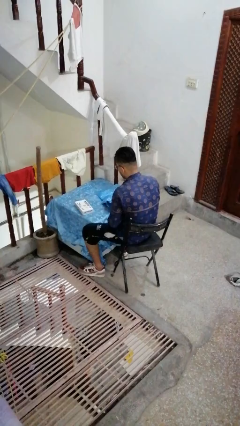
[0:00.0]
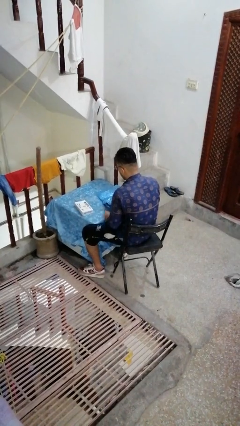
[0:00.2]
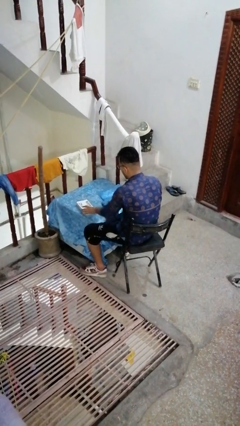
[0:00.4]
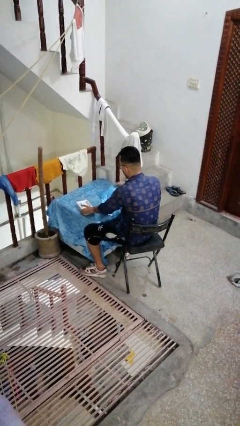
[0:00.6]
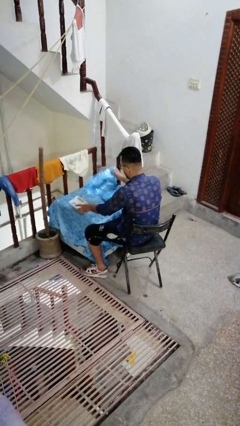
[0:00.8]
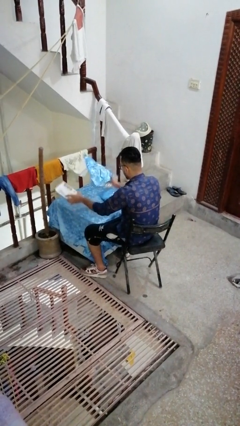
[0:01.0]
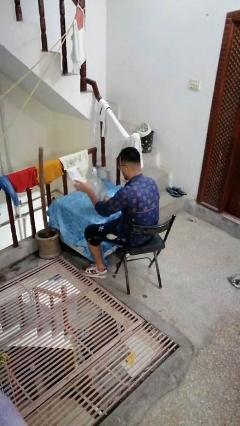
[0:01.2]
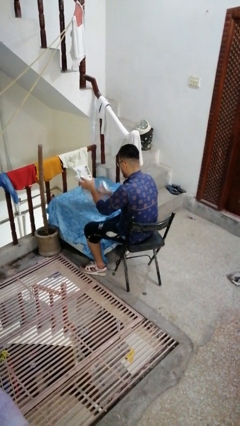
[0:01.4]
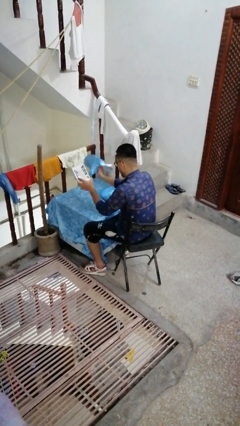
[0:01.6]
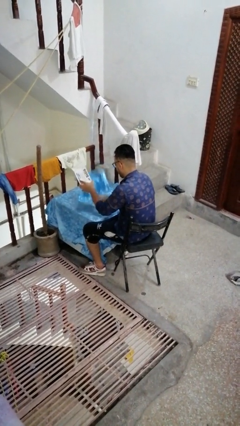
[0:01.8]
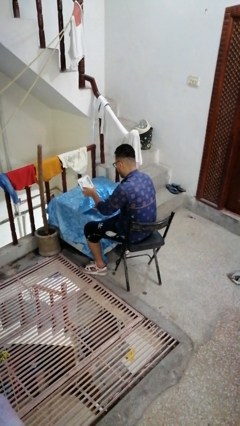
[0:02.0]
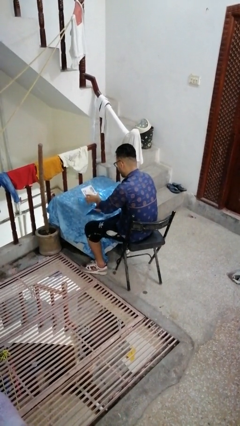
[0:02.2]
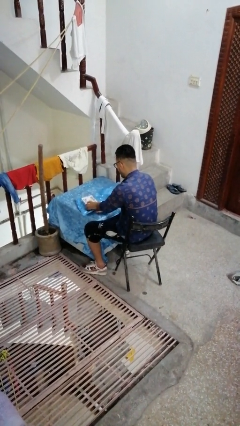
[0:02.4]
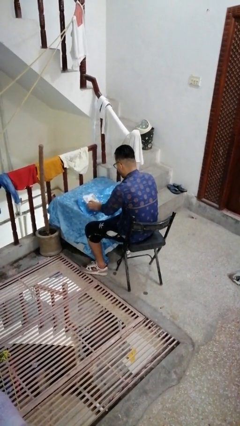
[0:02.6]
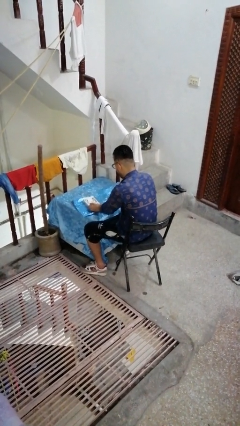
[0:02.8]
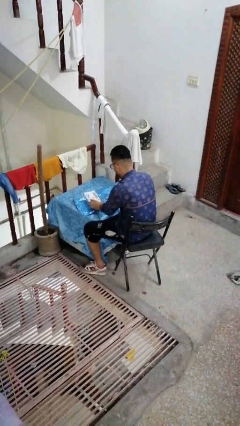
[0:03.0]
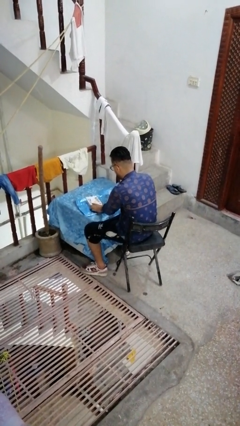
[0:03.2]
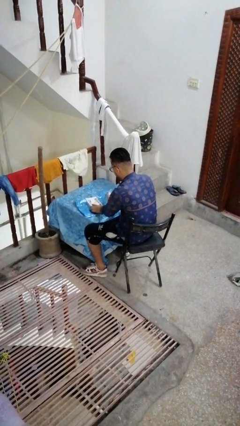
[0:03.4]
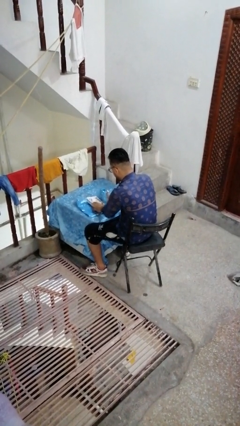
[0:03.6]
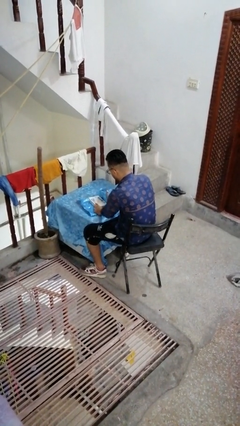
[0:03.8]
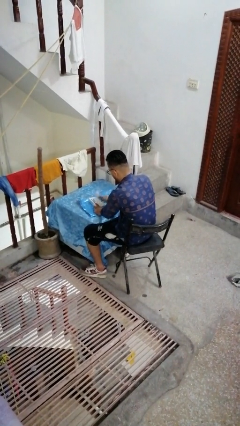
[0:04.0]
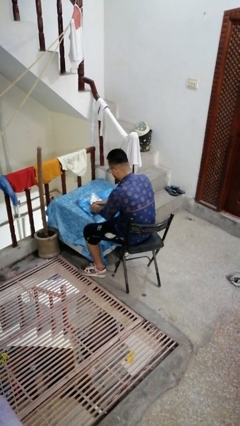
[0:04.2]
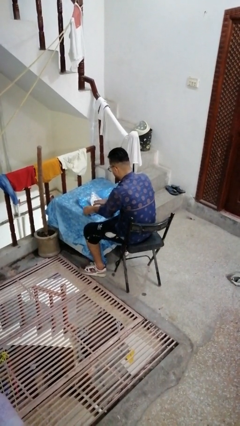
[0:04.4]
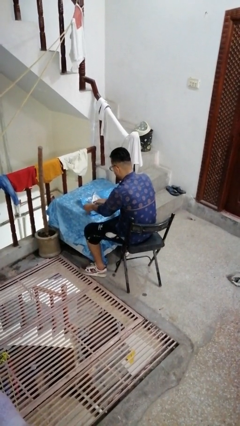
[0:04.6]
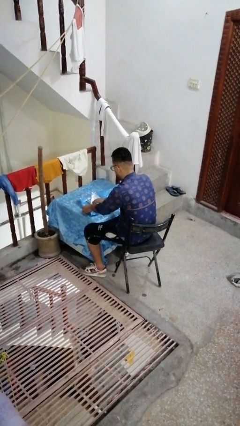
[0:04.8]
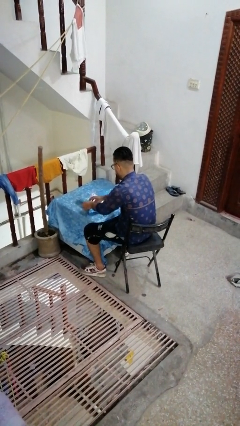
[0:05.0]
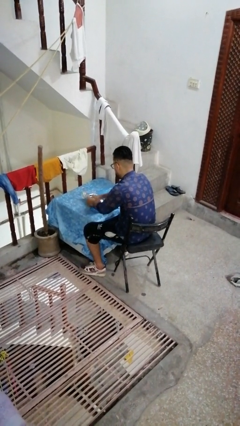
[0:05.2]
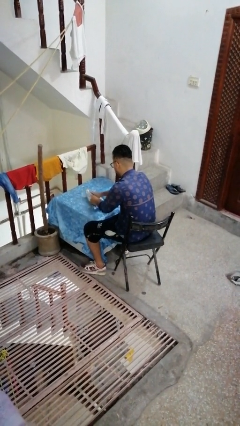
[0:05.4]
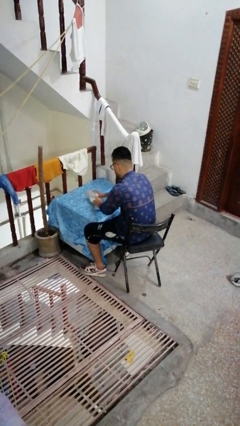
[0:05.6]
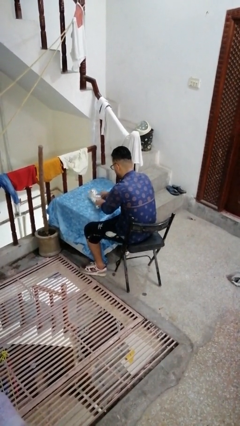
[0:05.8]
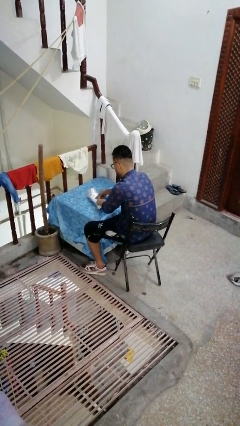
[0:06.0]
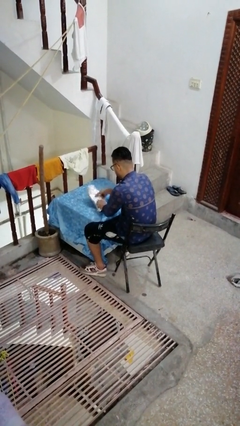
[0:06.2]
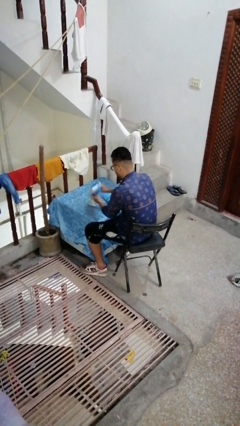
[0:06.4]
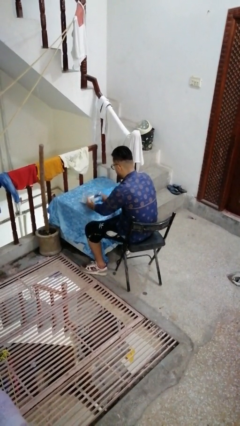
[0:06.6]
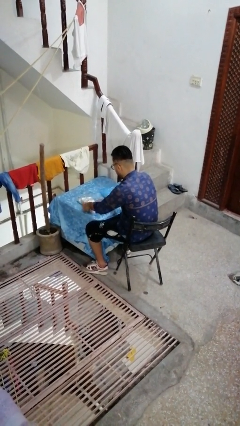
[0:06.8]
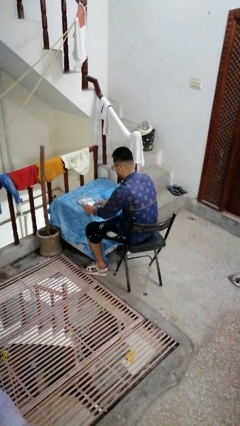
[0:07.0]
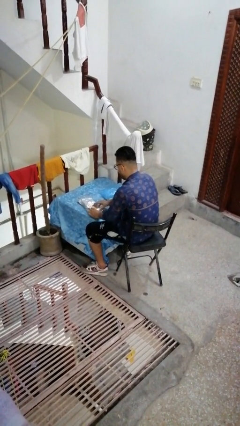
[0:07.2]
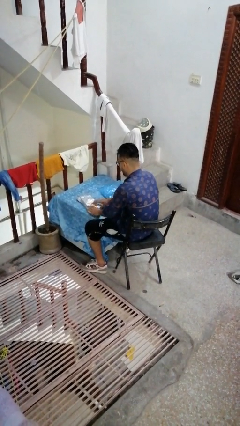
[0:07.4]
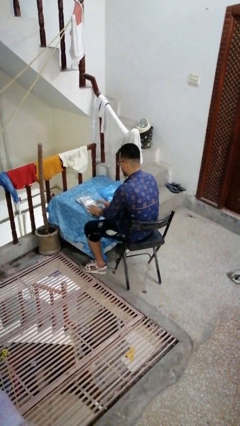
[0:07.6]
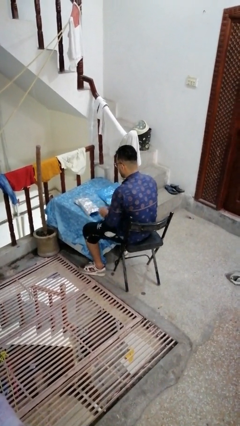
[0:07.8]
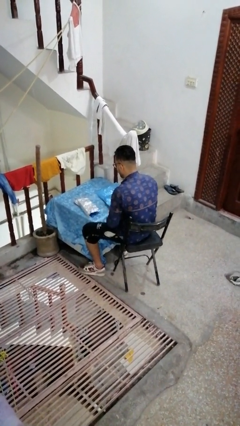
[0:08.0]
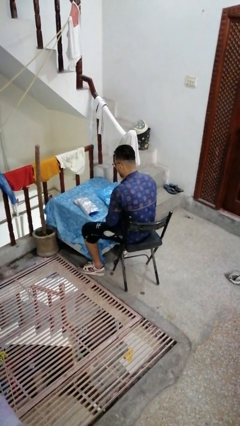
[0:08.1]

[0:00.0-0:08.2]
person wraps box

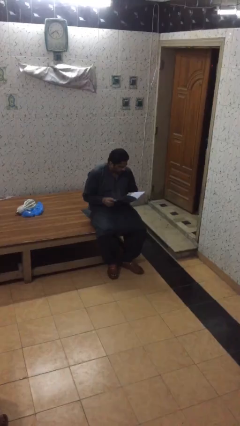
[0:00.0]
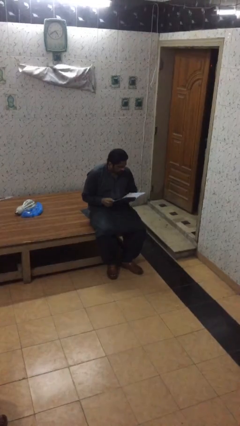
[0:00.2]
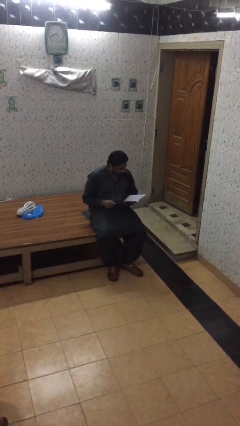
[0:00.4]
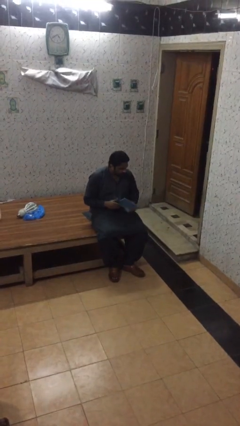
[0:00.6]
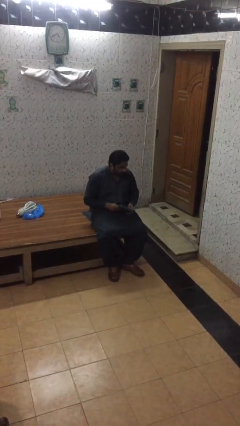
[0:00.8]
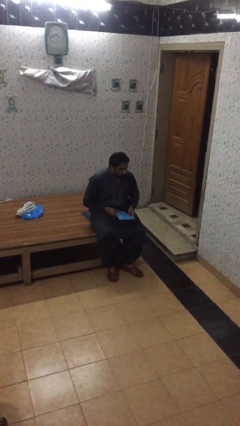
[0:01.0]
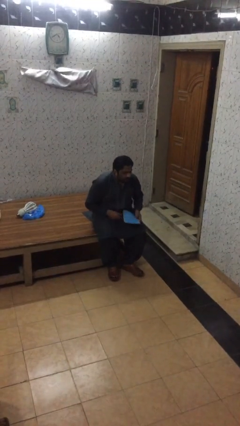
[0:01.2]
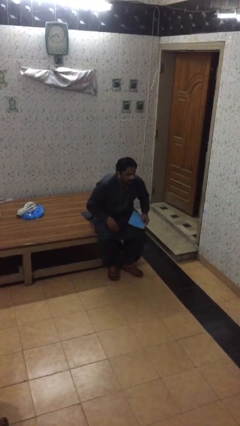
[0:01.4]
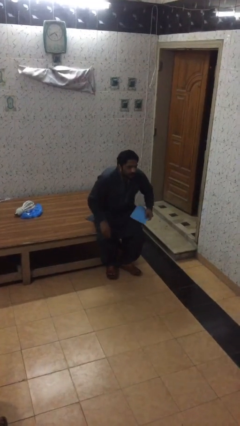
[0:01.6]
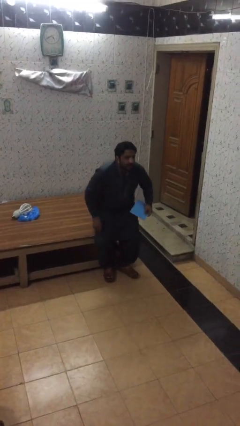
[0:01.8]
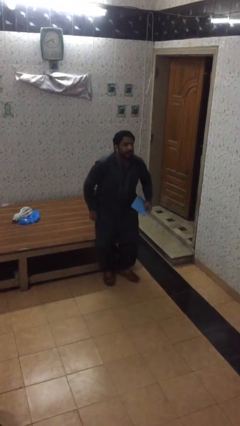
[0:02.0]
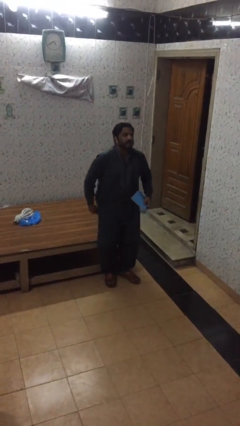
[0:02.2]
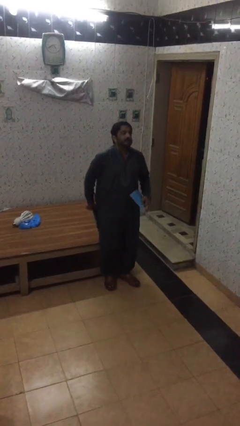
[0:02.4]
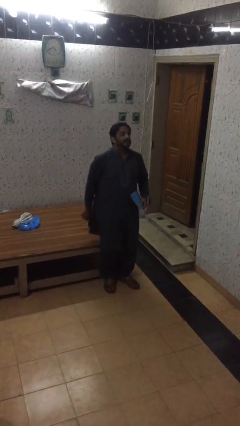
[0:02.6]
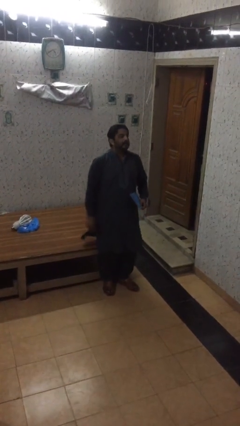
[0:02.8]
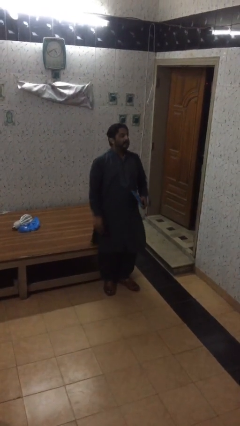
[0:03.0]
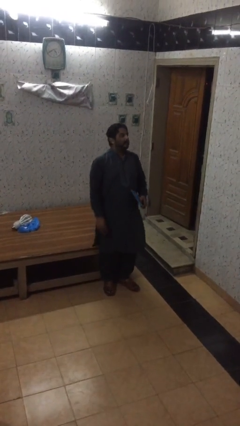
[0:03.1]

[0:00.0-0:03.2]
person stands up

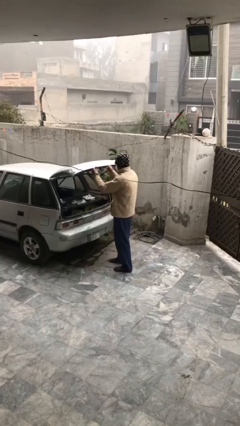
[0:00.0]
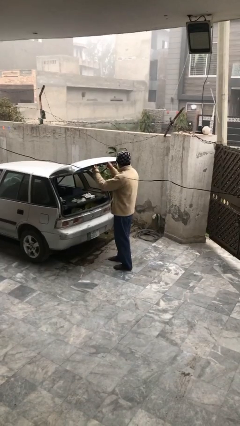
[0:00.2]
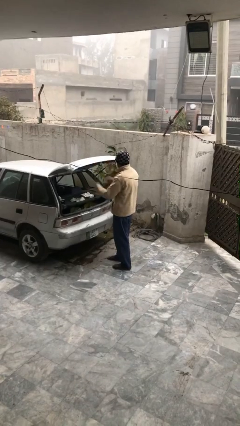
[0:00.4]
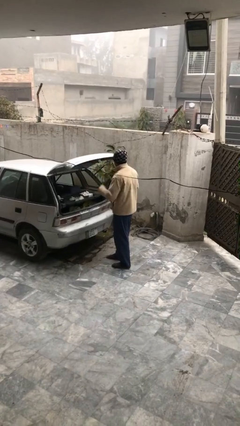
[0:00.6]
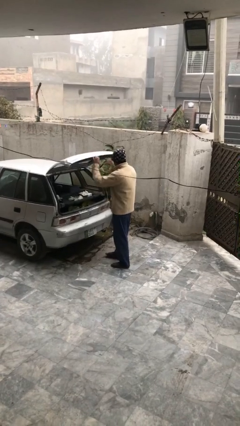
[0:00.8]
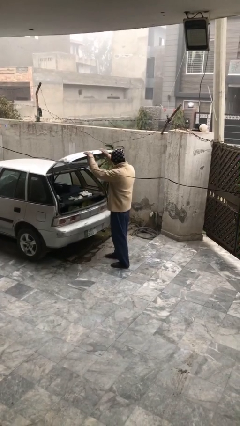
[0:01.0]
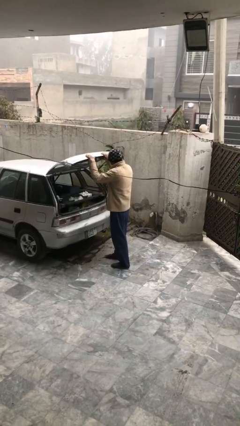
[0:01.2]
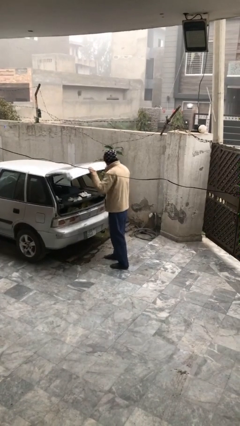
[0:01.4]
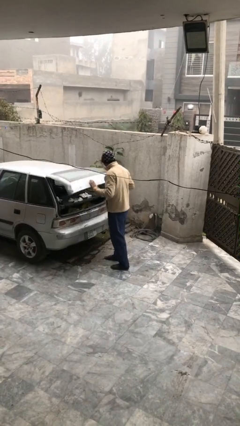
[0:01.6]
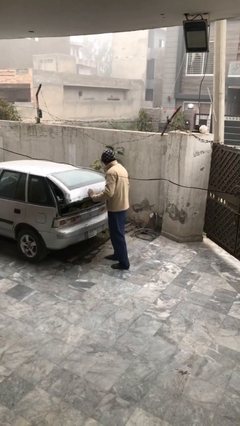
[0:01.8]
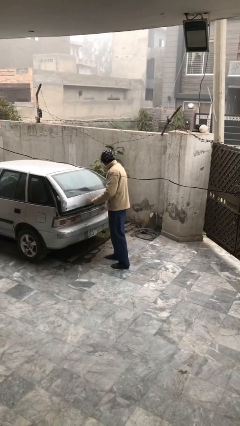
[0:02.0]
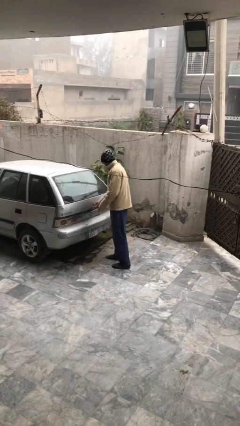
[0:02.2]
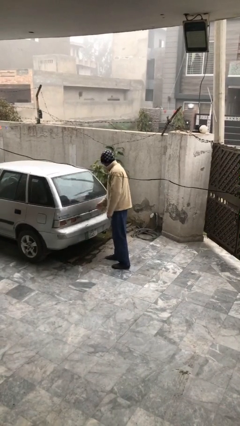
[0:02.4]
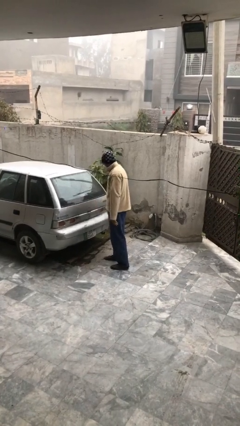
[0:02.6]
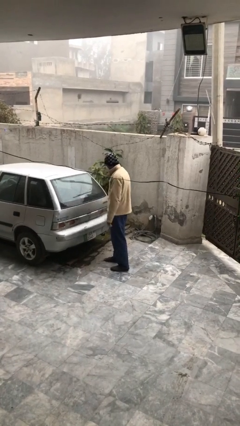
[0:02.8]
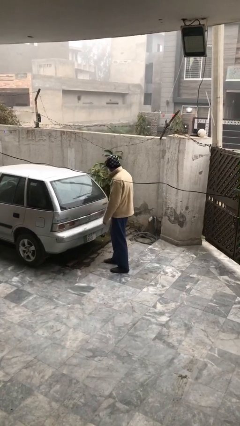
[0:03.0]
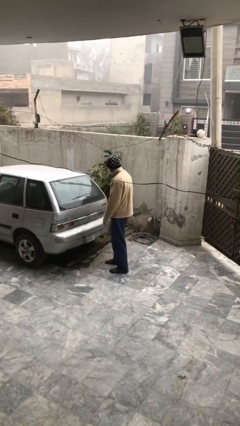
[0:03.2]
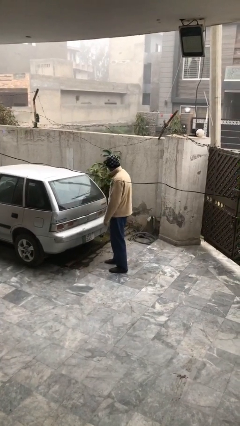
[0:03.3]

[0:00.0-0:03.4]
person closes car trunk

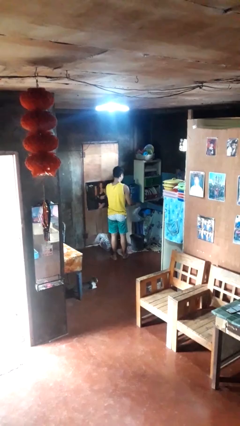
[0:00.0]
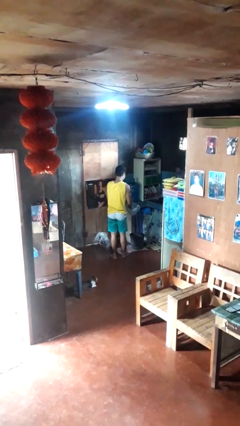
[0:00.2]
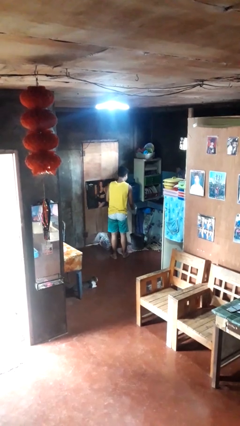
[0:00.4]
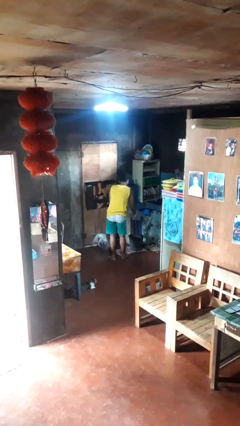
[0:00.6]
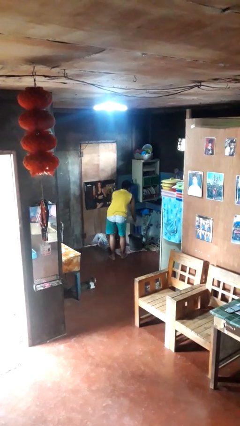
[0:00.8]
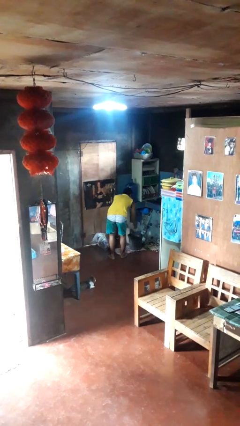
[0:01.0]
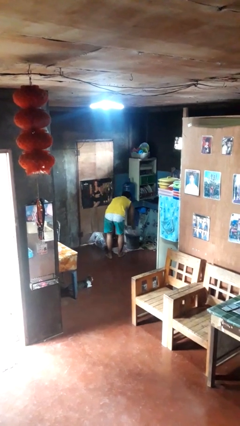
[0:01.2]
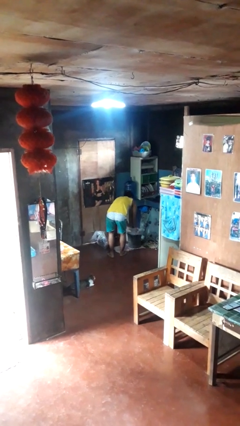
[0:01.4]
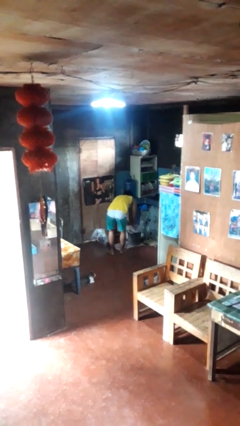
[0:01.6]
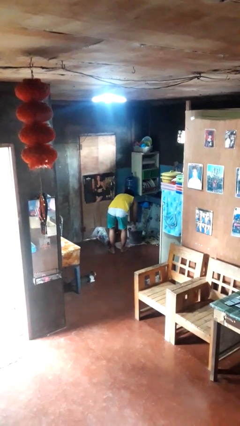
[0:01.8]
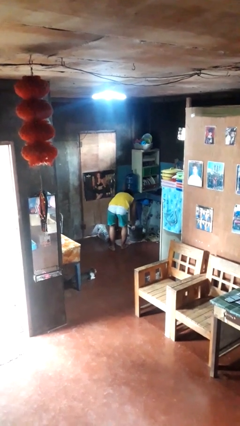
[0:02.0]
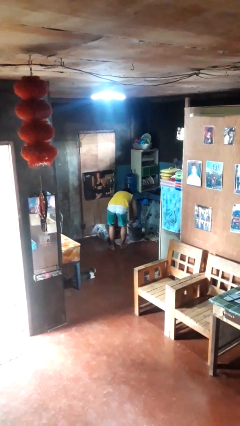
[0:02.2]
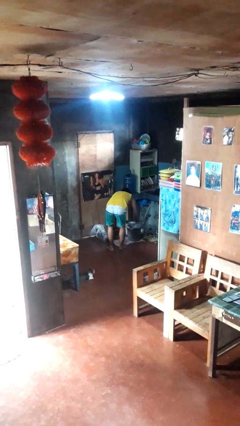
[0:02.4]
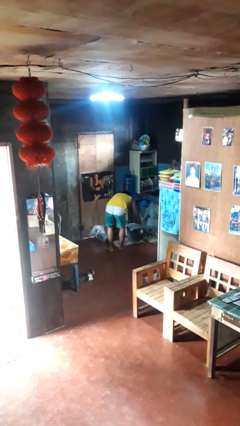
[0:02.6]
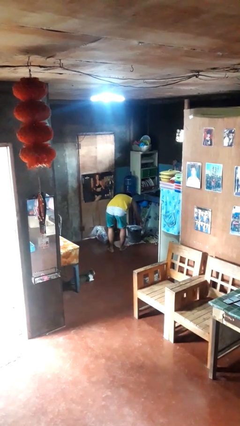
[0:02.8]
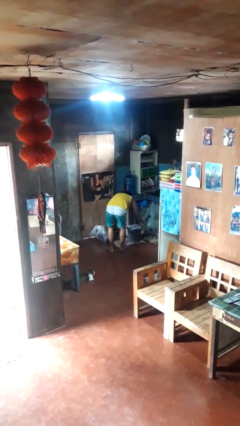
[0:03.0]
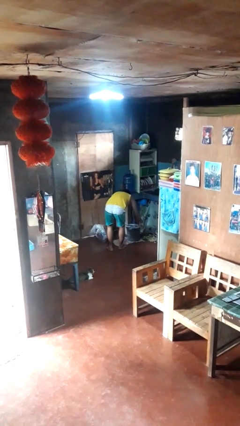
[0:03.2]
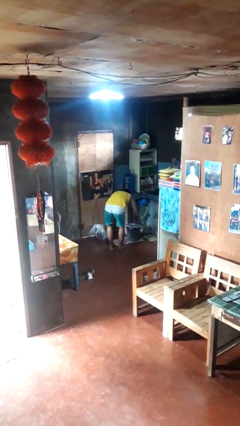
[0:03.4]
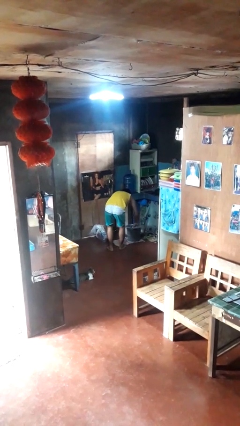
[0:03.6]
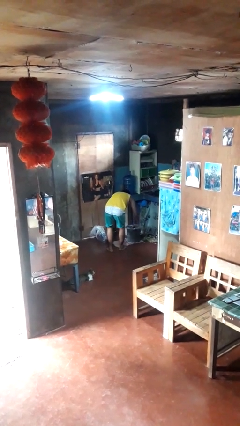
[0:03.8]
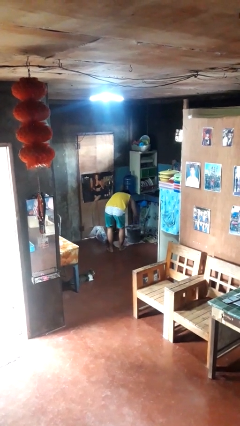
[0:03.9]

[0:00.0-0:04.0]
person inserts trashbag into trashcan
